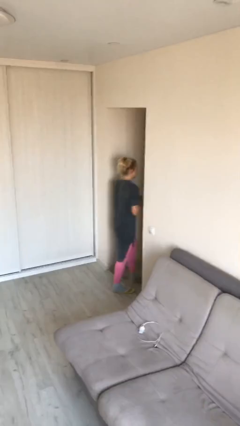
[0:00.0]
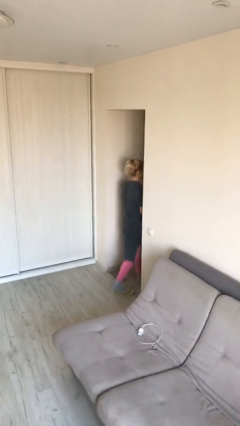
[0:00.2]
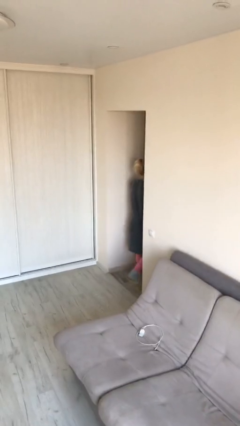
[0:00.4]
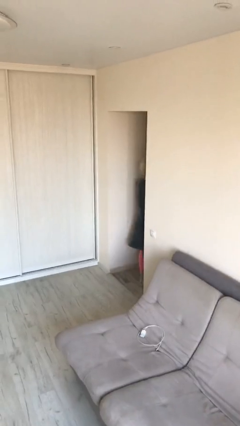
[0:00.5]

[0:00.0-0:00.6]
person exits scene through structure

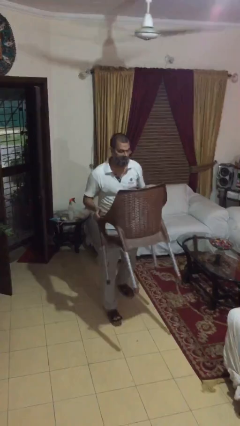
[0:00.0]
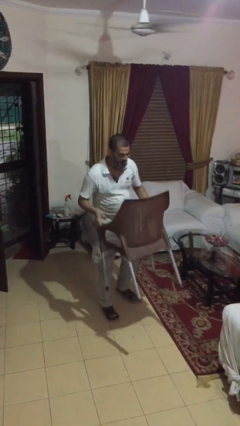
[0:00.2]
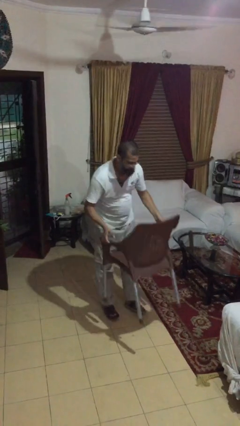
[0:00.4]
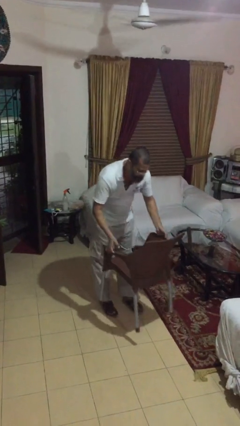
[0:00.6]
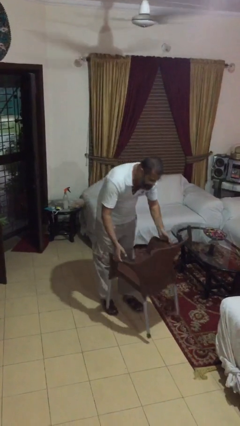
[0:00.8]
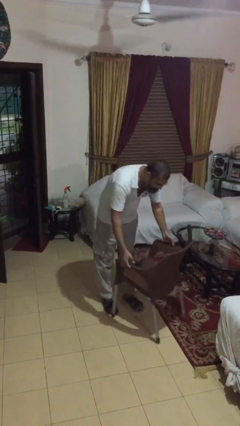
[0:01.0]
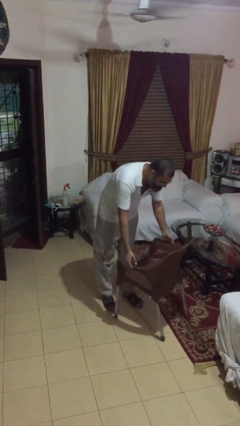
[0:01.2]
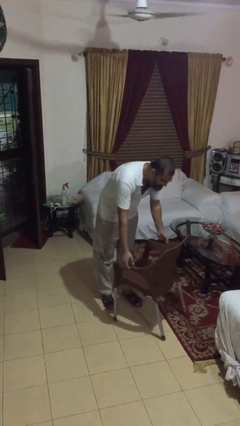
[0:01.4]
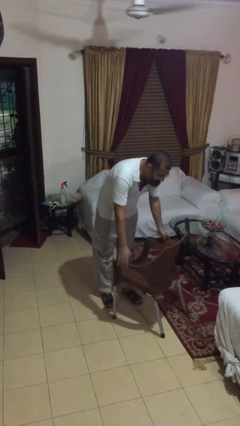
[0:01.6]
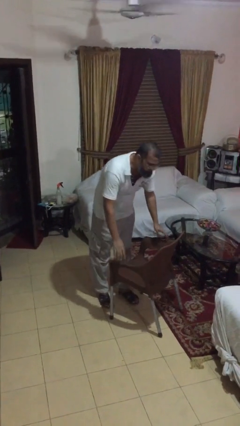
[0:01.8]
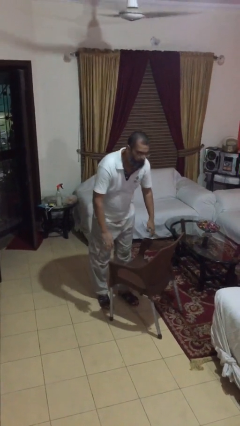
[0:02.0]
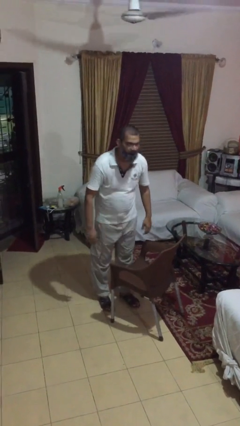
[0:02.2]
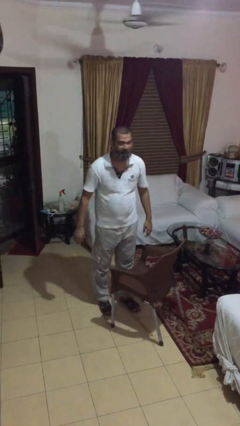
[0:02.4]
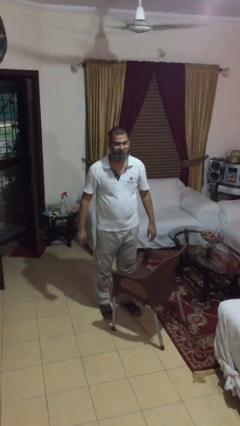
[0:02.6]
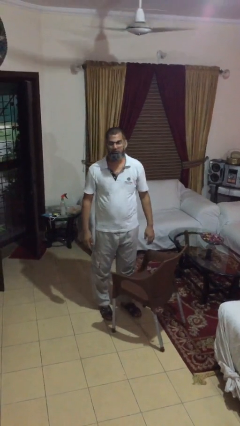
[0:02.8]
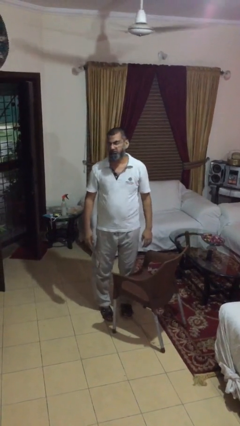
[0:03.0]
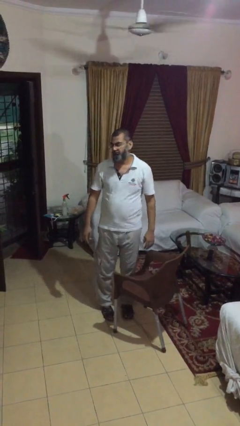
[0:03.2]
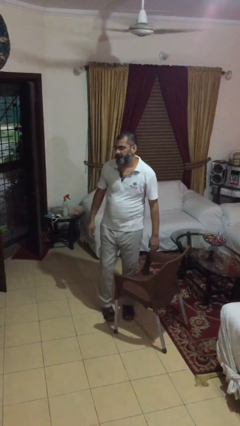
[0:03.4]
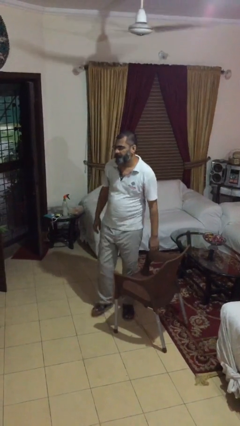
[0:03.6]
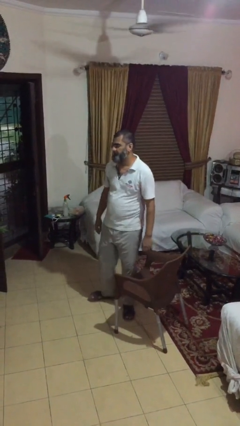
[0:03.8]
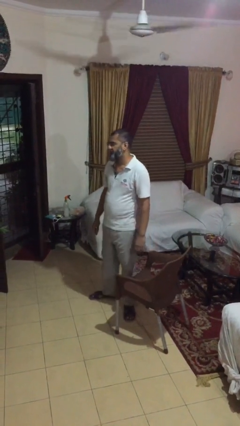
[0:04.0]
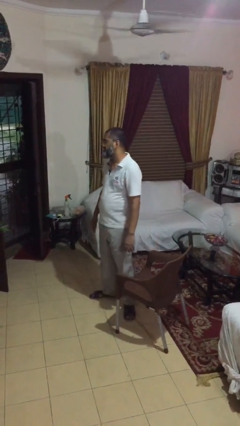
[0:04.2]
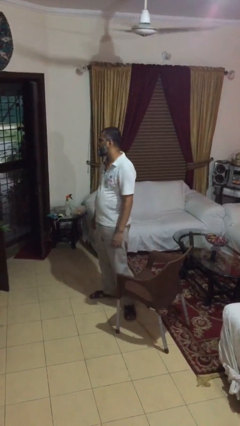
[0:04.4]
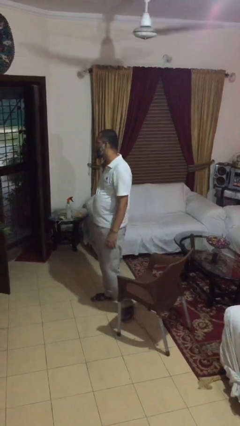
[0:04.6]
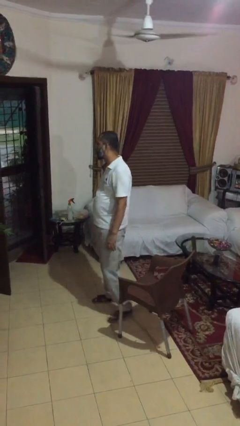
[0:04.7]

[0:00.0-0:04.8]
person puts down object on floor

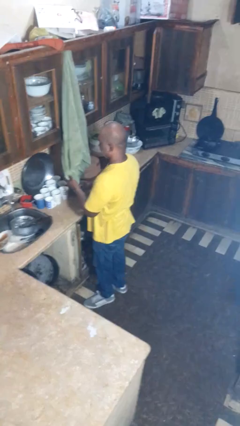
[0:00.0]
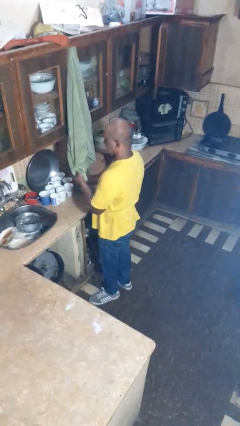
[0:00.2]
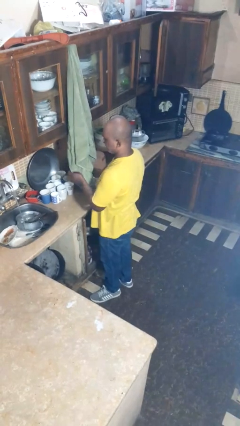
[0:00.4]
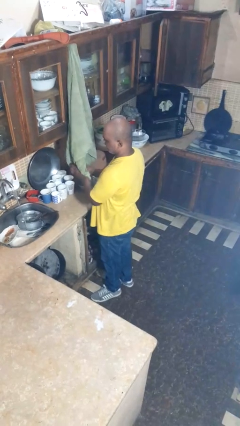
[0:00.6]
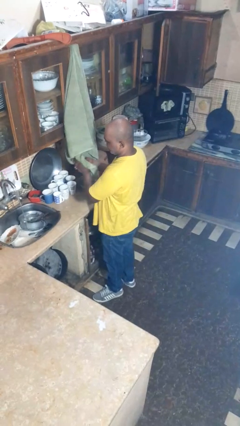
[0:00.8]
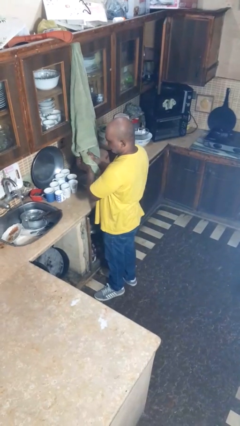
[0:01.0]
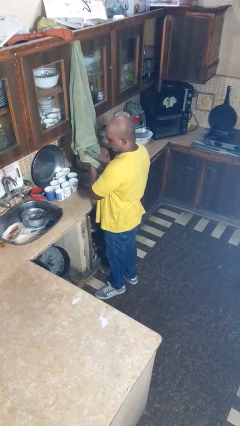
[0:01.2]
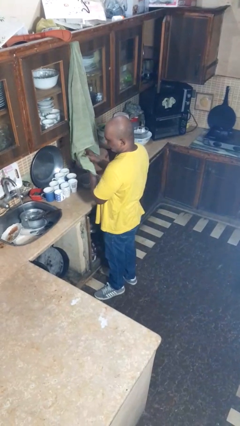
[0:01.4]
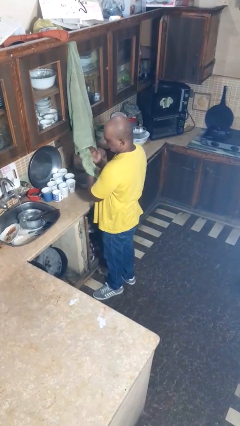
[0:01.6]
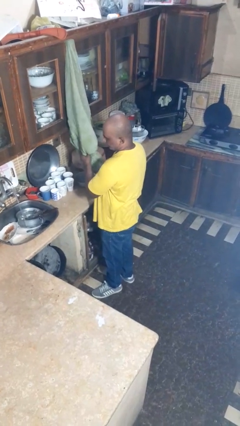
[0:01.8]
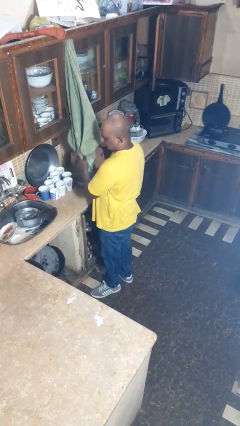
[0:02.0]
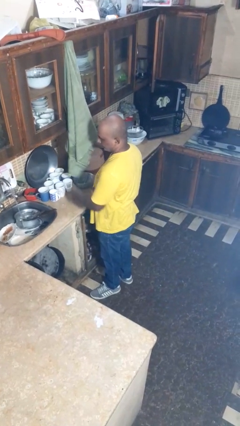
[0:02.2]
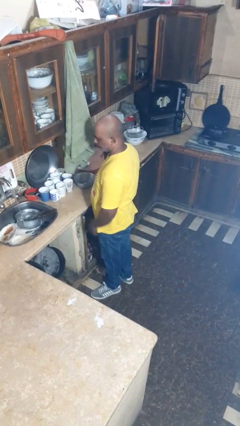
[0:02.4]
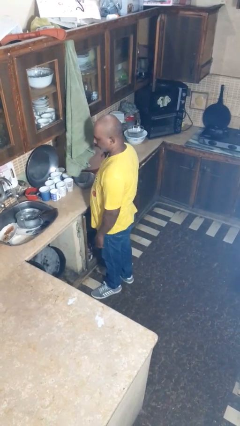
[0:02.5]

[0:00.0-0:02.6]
person dries hands with towel

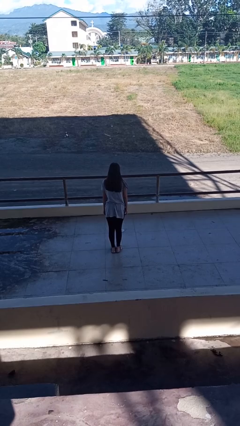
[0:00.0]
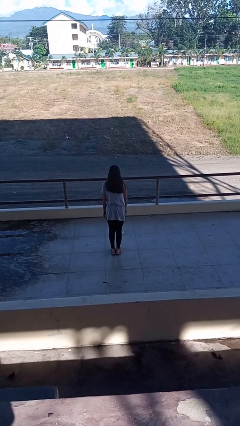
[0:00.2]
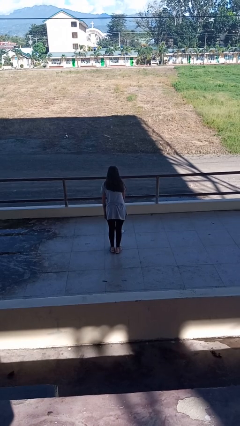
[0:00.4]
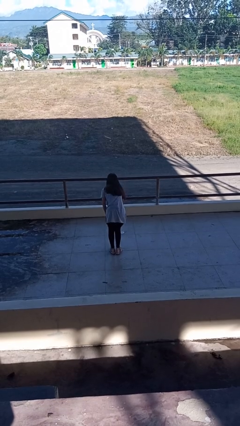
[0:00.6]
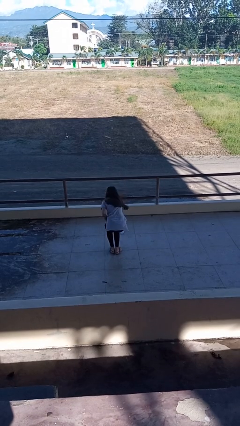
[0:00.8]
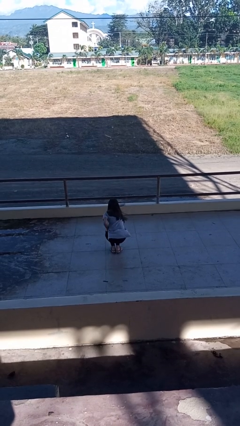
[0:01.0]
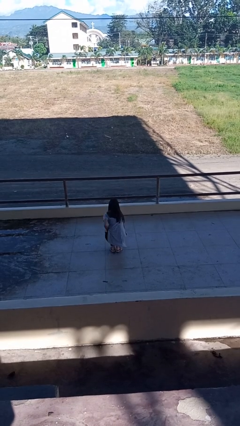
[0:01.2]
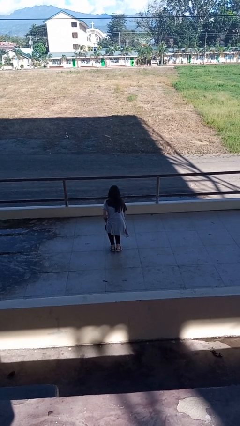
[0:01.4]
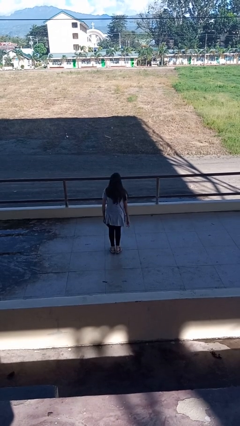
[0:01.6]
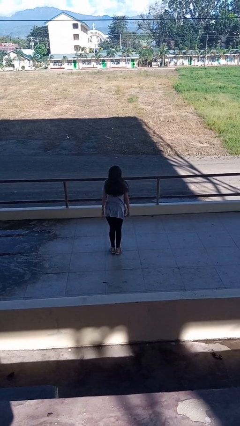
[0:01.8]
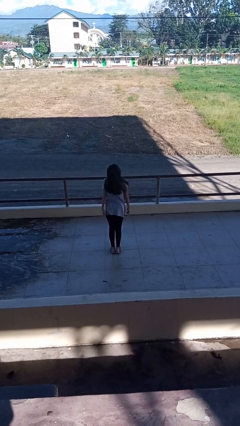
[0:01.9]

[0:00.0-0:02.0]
person picks up object from floor

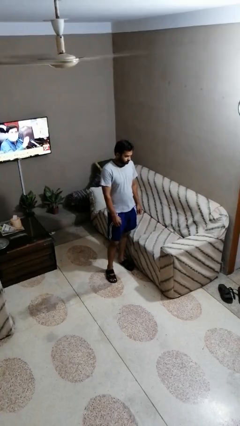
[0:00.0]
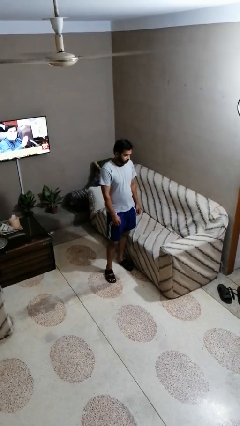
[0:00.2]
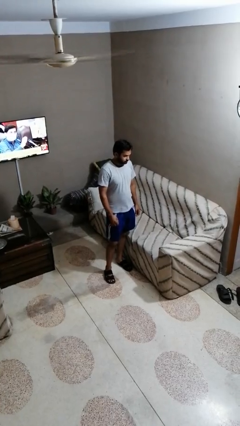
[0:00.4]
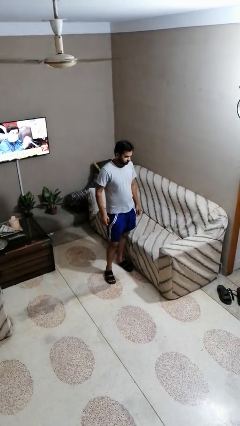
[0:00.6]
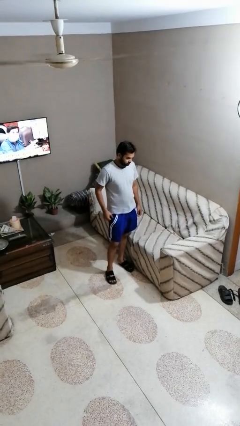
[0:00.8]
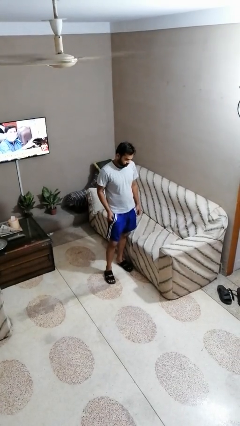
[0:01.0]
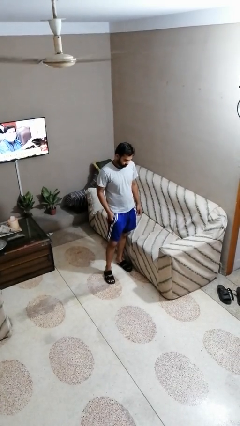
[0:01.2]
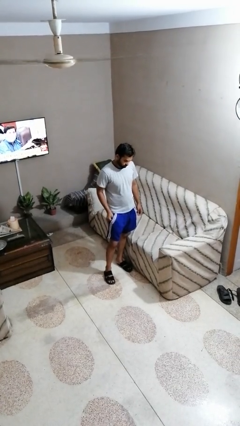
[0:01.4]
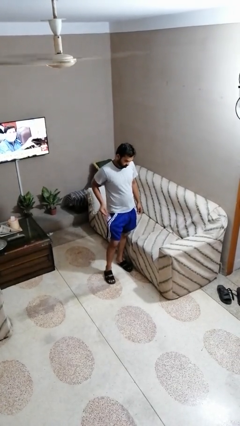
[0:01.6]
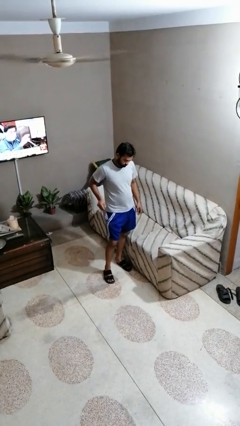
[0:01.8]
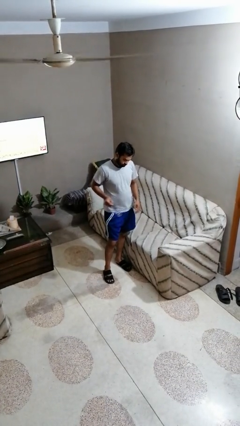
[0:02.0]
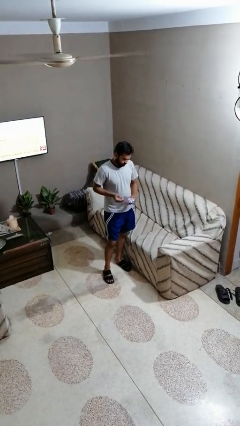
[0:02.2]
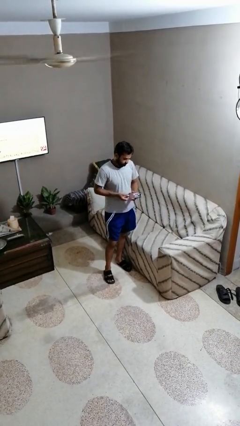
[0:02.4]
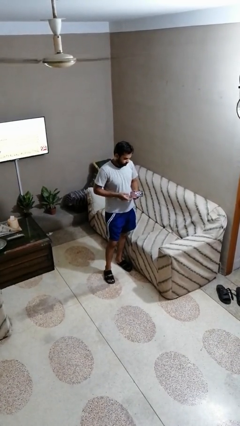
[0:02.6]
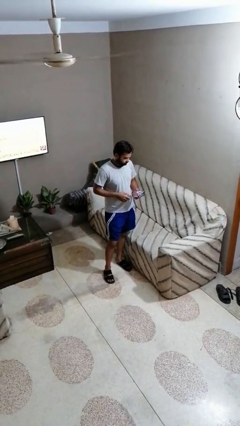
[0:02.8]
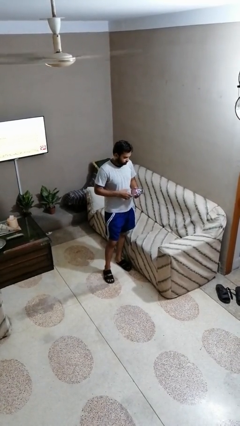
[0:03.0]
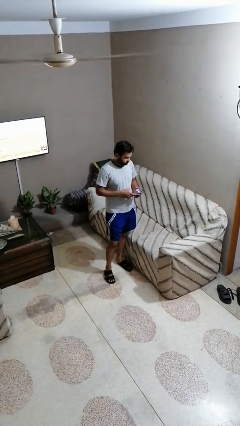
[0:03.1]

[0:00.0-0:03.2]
person takes phone from pocket

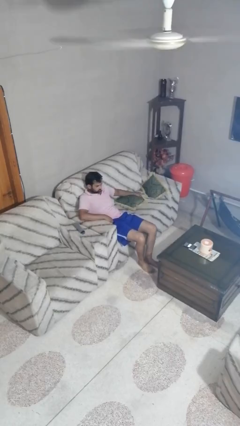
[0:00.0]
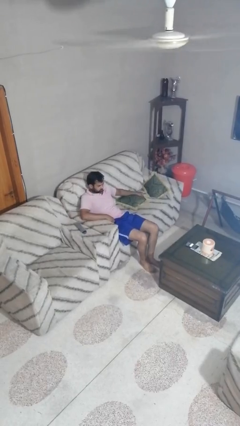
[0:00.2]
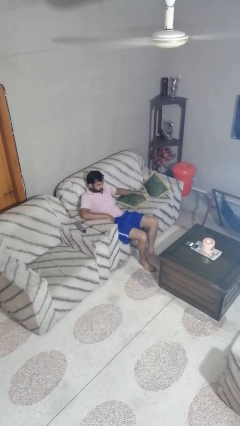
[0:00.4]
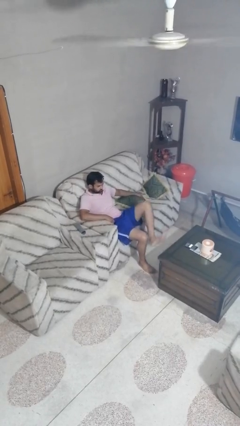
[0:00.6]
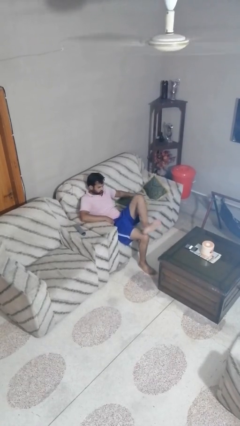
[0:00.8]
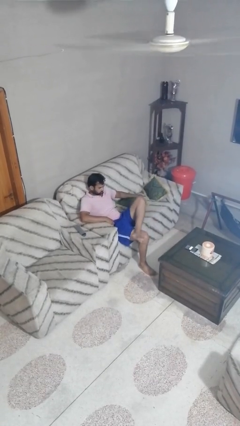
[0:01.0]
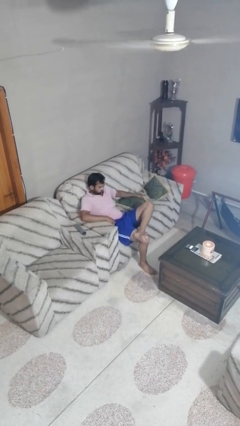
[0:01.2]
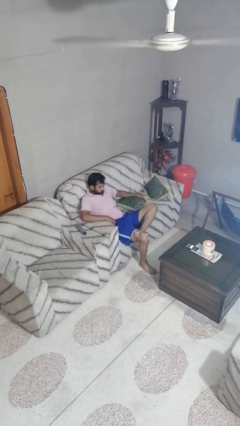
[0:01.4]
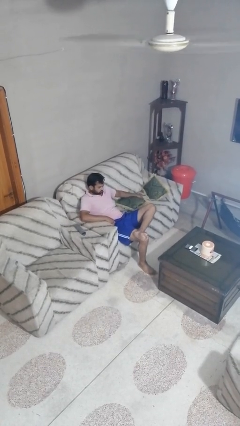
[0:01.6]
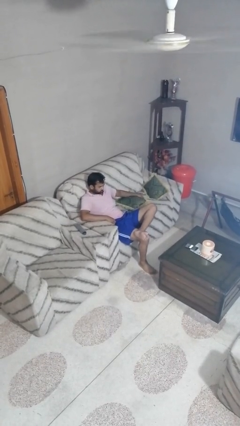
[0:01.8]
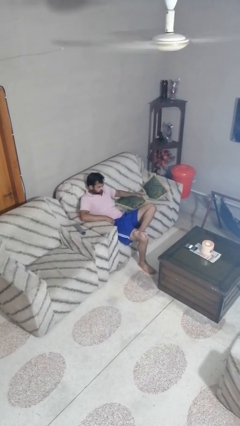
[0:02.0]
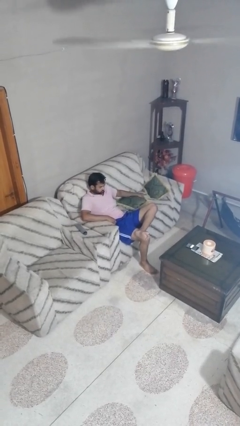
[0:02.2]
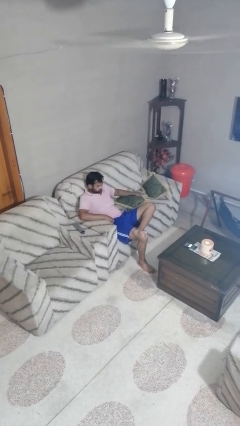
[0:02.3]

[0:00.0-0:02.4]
person crosses legs

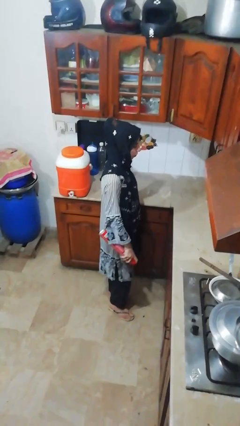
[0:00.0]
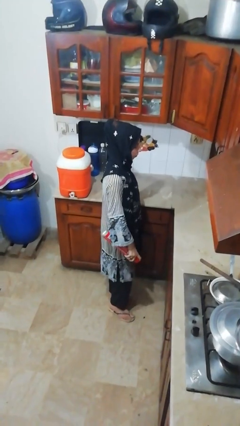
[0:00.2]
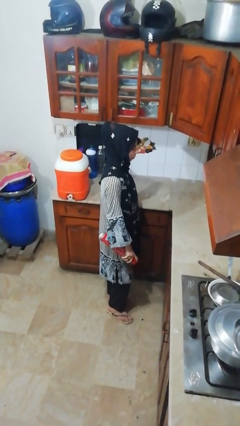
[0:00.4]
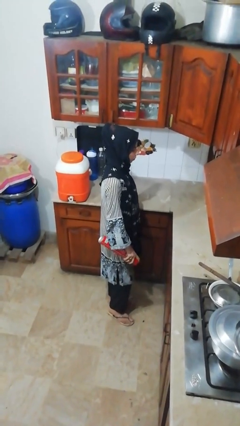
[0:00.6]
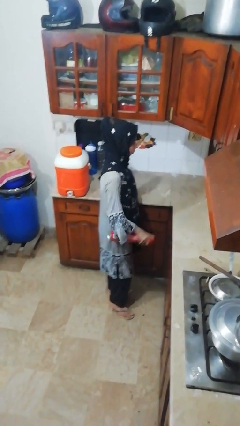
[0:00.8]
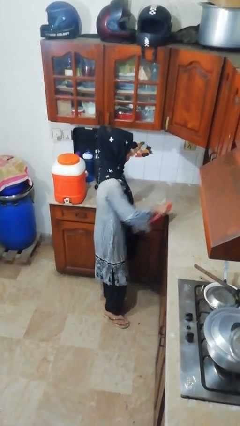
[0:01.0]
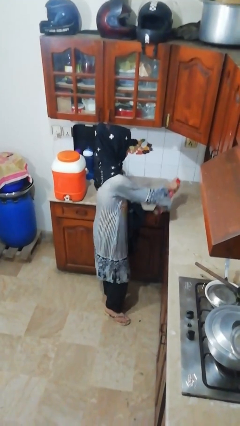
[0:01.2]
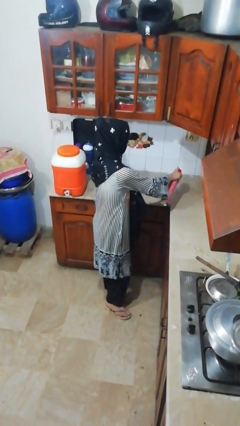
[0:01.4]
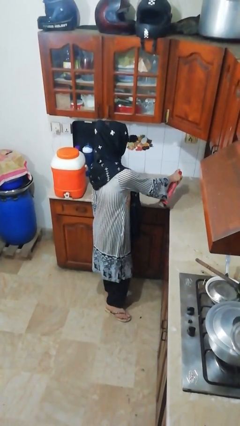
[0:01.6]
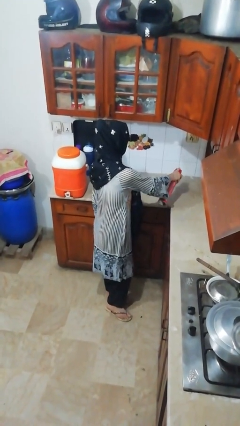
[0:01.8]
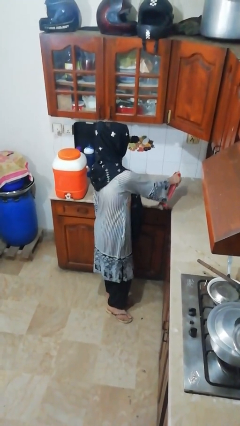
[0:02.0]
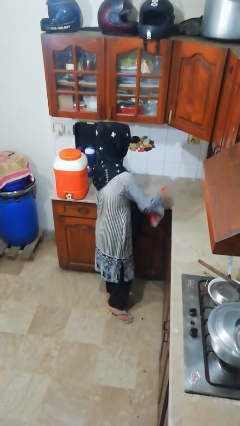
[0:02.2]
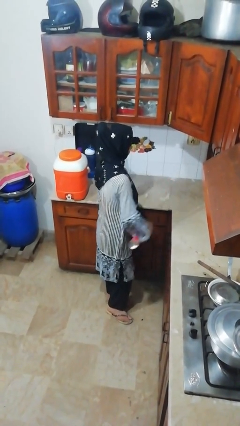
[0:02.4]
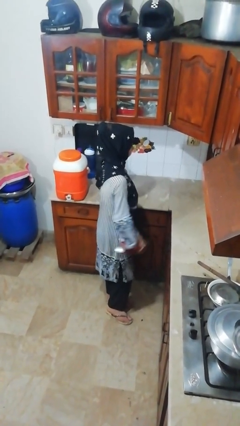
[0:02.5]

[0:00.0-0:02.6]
person sprays from bottle
